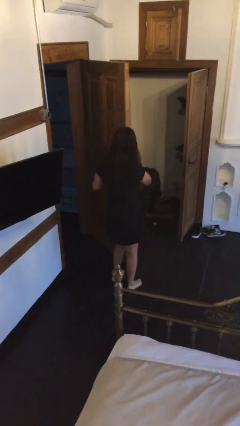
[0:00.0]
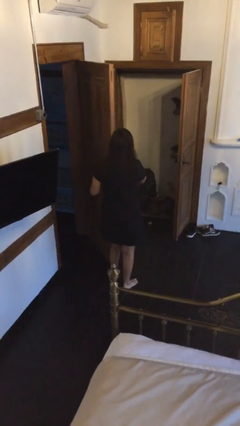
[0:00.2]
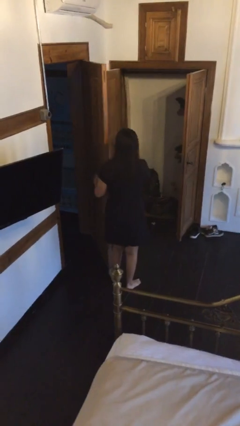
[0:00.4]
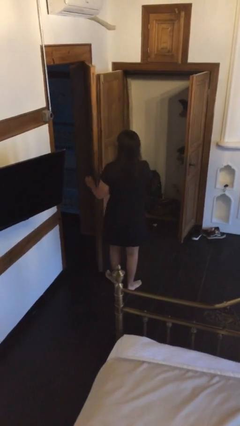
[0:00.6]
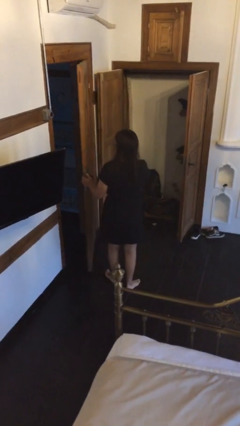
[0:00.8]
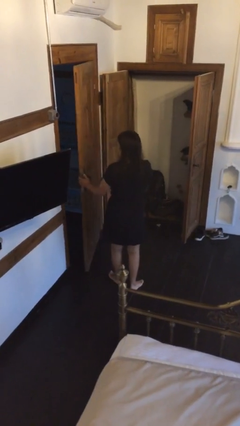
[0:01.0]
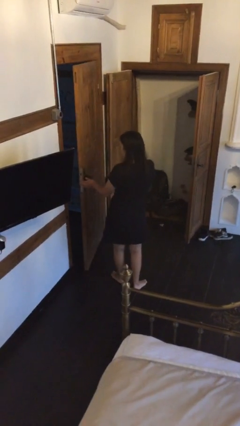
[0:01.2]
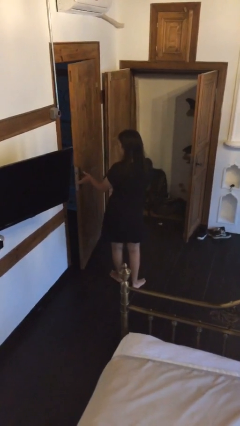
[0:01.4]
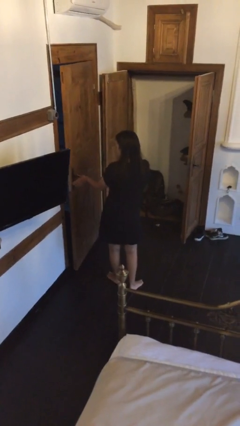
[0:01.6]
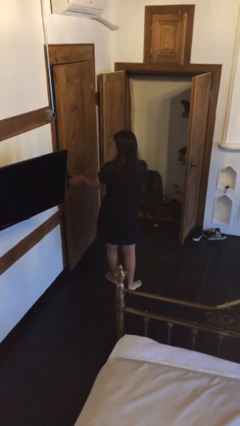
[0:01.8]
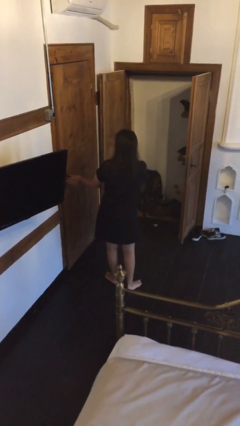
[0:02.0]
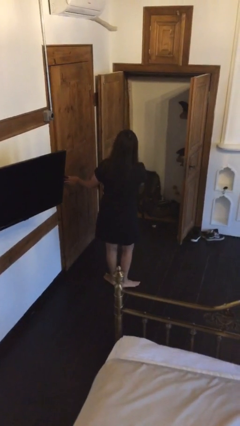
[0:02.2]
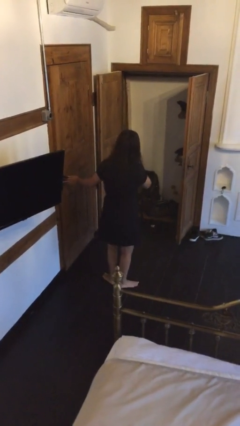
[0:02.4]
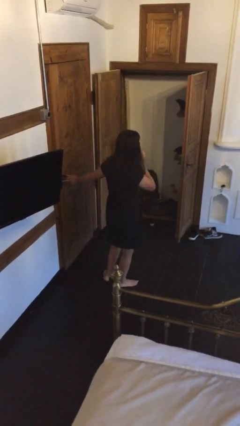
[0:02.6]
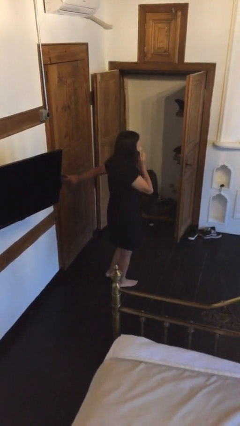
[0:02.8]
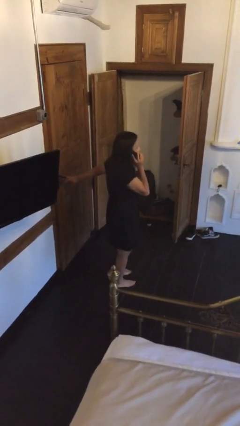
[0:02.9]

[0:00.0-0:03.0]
person closes facility door

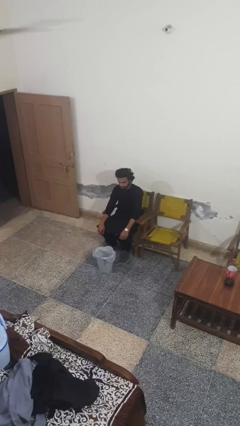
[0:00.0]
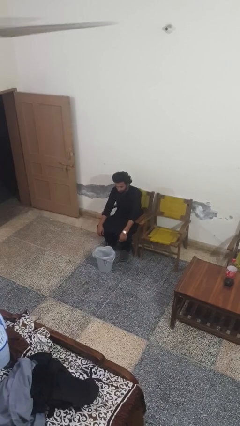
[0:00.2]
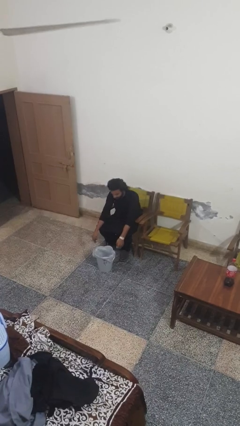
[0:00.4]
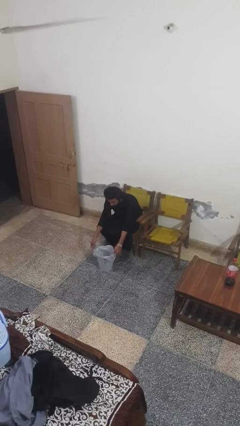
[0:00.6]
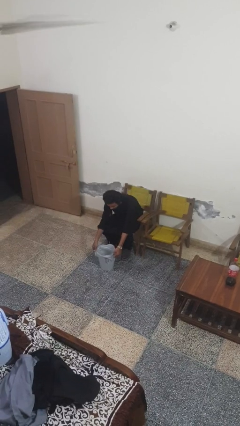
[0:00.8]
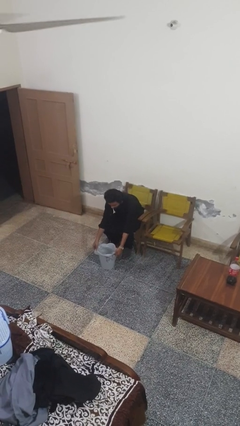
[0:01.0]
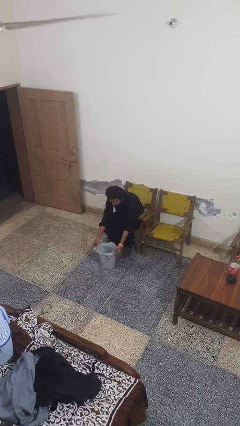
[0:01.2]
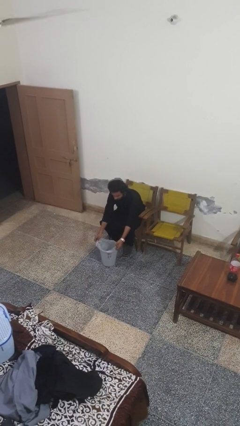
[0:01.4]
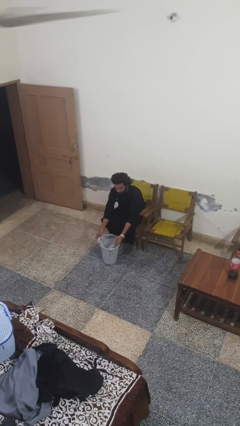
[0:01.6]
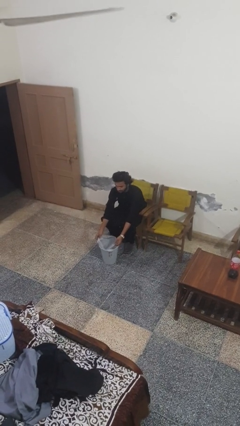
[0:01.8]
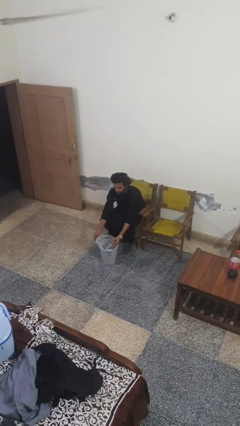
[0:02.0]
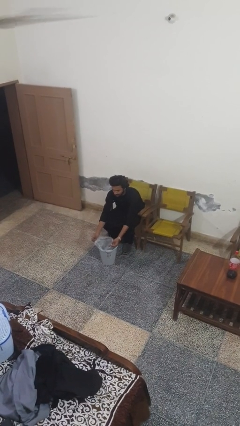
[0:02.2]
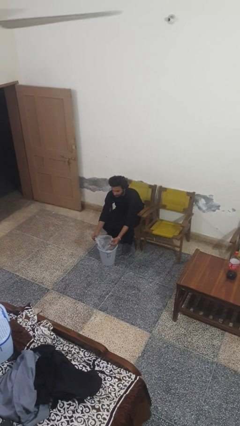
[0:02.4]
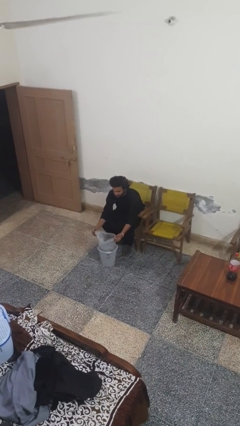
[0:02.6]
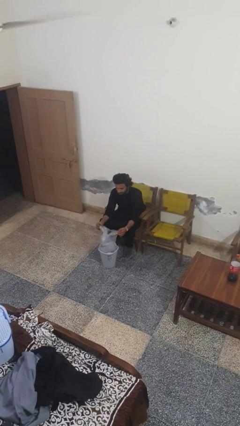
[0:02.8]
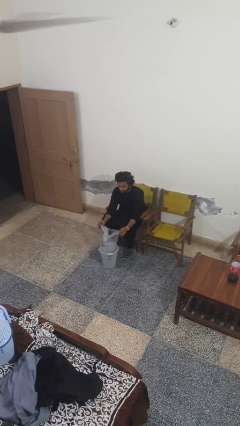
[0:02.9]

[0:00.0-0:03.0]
person removes trashbag from trashcan

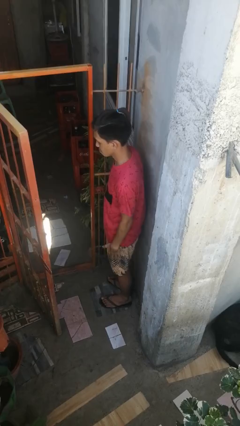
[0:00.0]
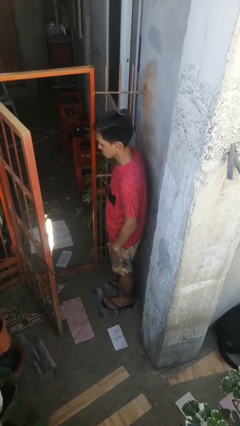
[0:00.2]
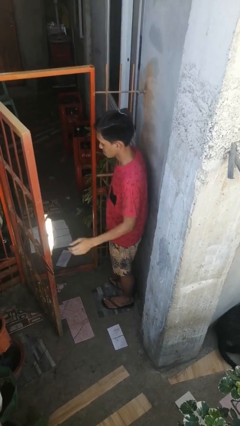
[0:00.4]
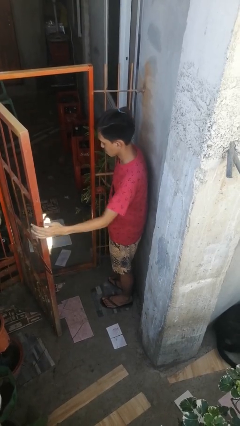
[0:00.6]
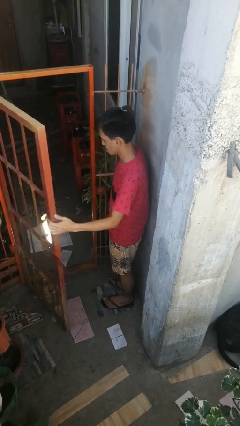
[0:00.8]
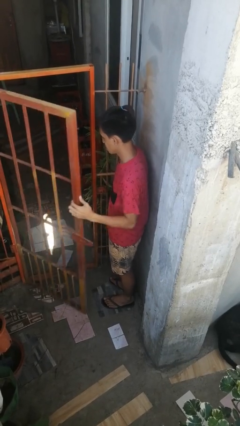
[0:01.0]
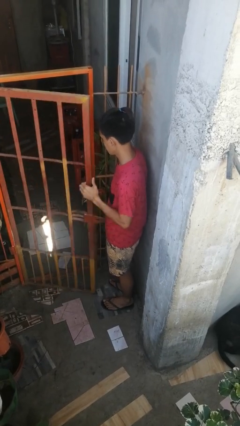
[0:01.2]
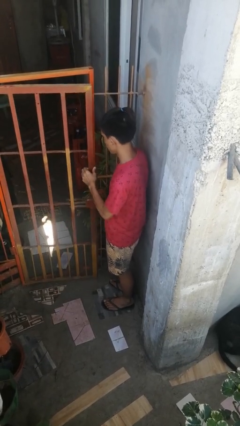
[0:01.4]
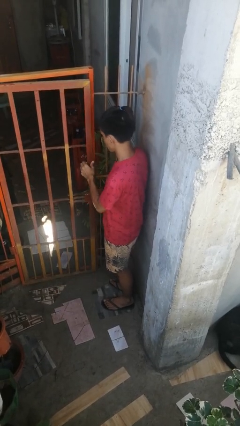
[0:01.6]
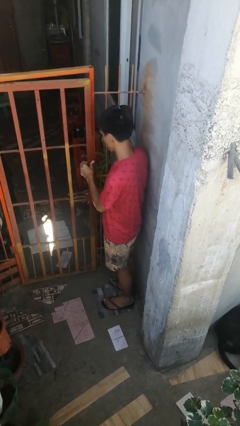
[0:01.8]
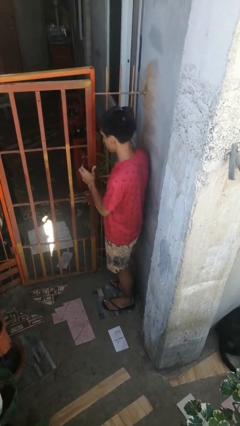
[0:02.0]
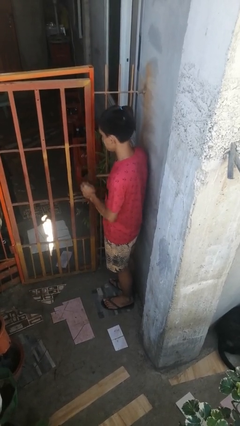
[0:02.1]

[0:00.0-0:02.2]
person closes gate

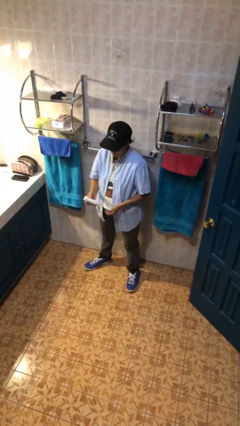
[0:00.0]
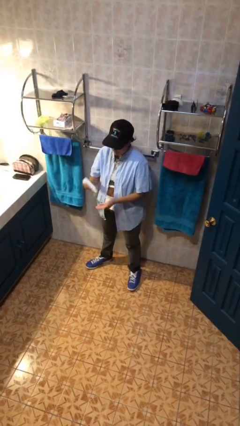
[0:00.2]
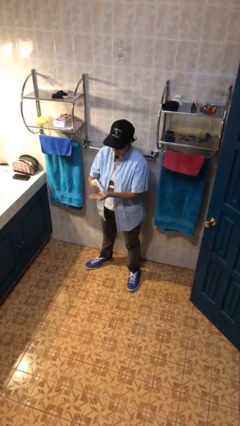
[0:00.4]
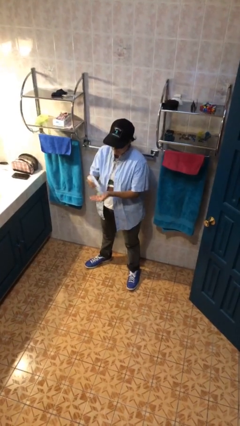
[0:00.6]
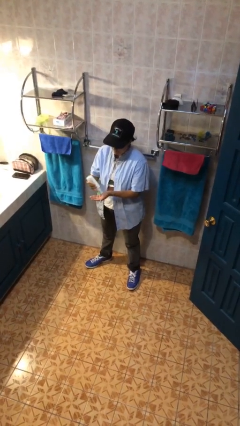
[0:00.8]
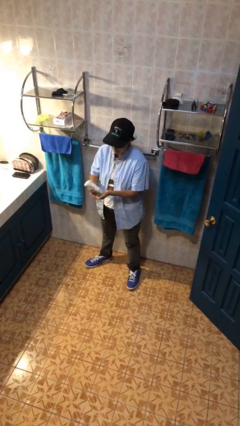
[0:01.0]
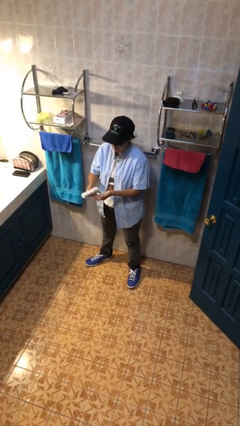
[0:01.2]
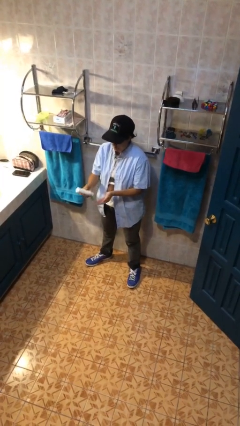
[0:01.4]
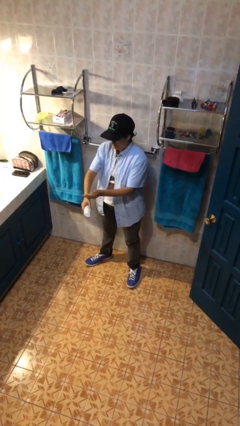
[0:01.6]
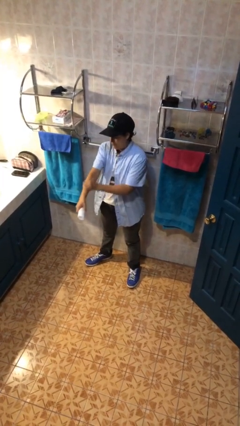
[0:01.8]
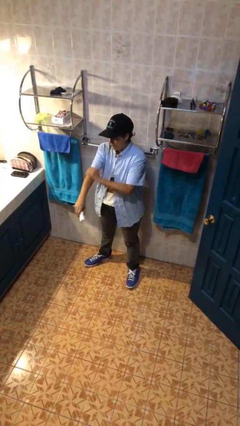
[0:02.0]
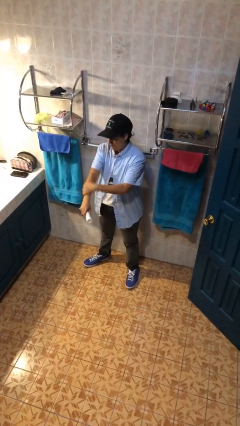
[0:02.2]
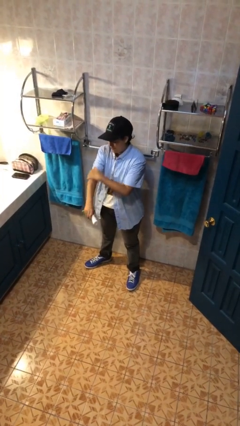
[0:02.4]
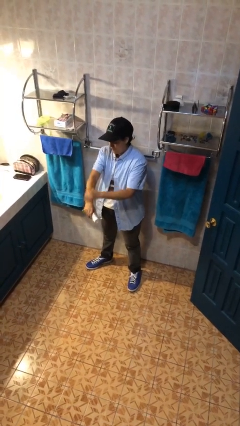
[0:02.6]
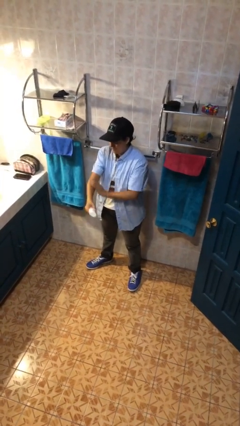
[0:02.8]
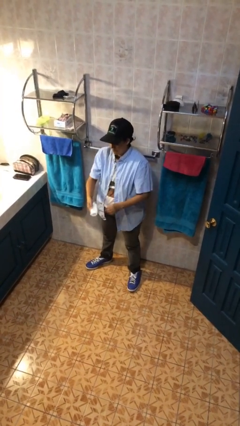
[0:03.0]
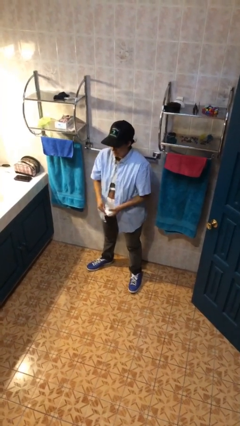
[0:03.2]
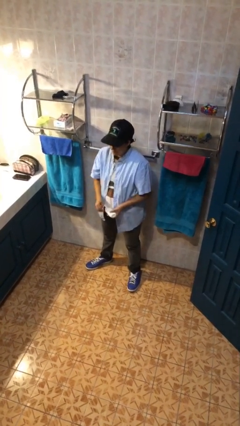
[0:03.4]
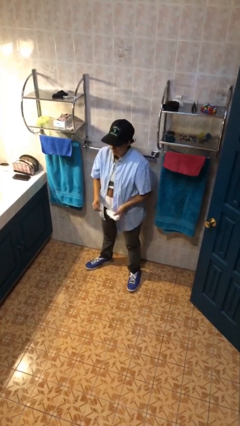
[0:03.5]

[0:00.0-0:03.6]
person applies sunscreen

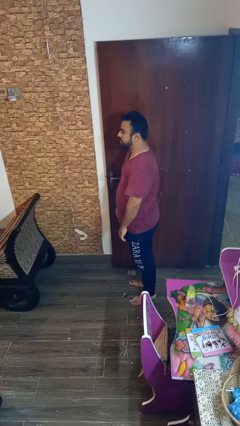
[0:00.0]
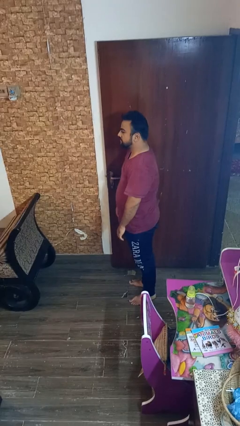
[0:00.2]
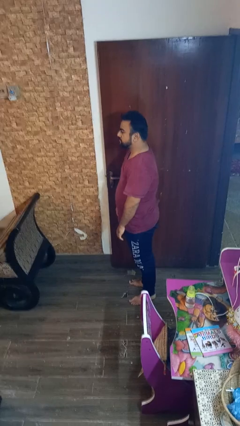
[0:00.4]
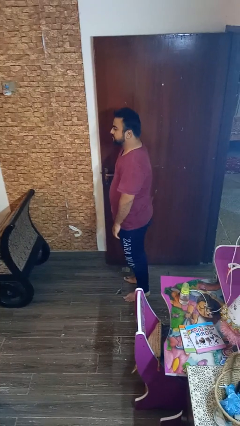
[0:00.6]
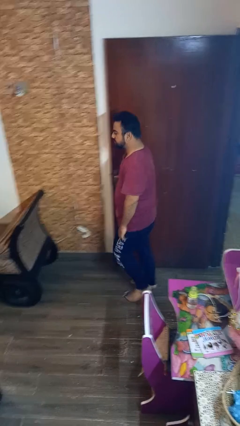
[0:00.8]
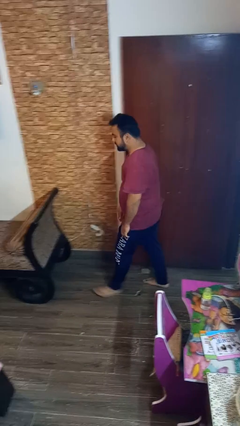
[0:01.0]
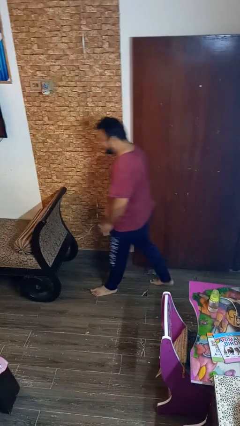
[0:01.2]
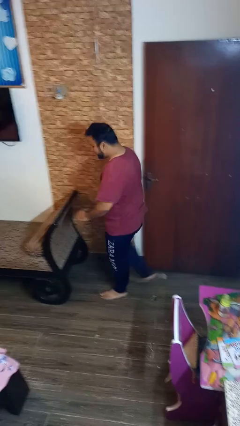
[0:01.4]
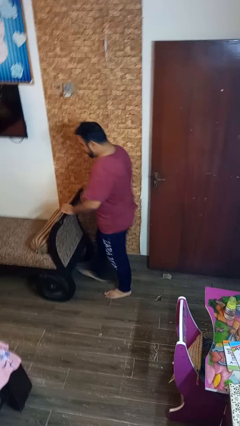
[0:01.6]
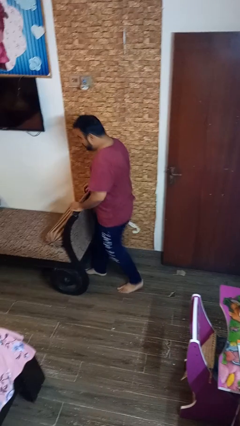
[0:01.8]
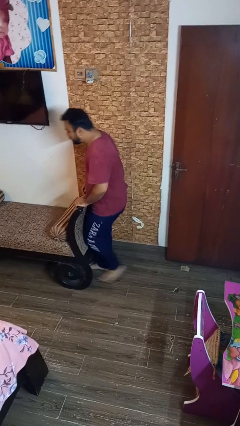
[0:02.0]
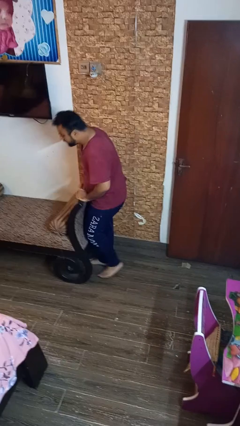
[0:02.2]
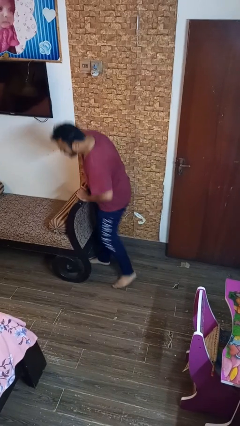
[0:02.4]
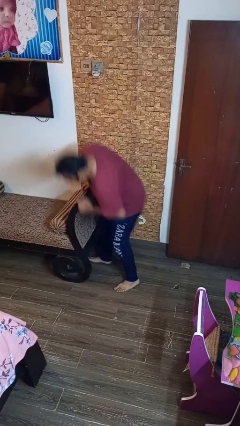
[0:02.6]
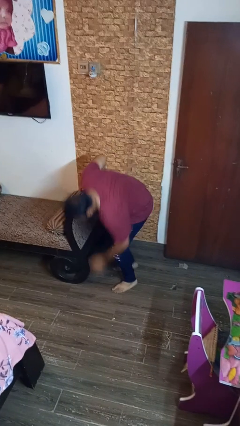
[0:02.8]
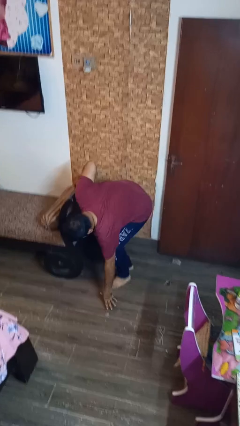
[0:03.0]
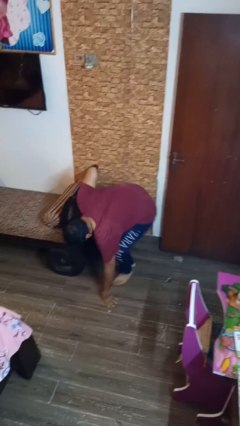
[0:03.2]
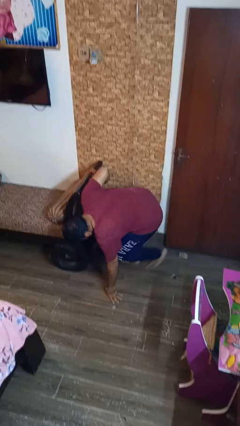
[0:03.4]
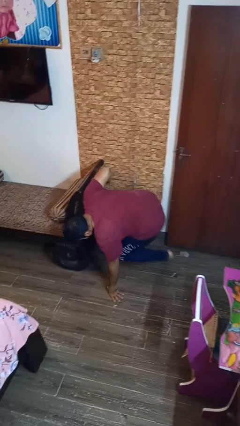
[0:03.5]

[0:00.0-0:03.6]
person trips on object on floor

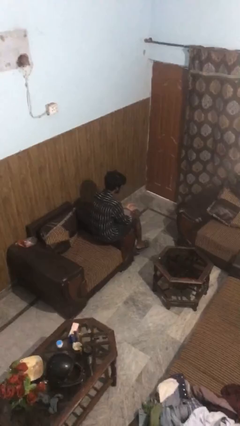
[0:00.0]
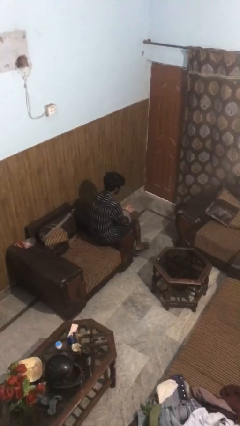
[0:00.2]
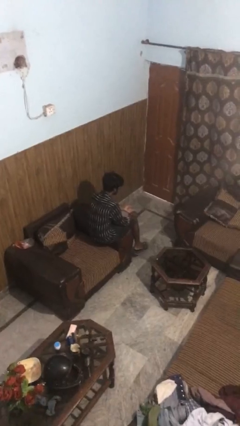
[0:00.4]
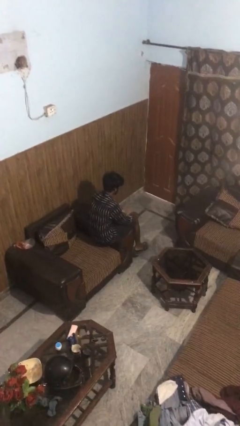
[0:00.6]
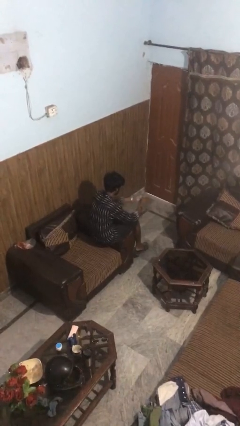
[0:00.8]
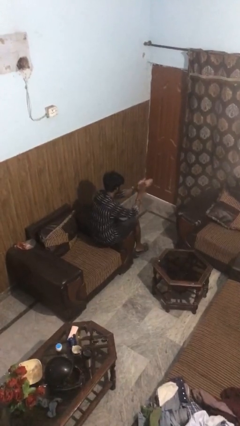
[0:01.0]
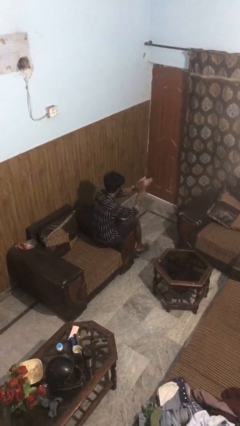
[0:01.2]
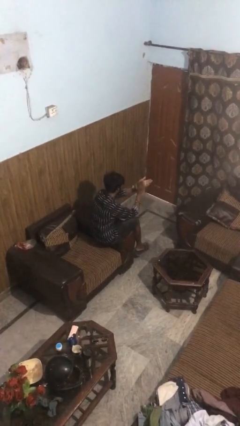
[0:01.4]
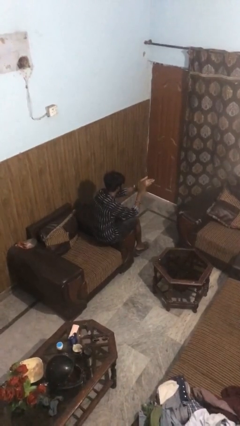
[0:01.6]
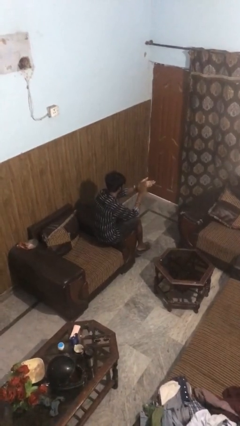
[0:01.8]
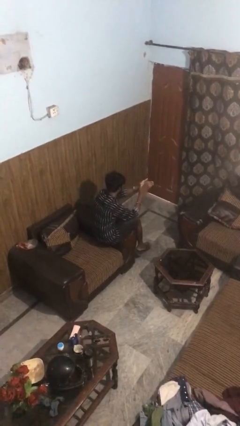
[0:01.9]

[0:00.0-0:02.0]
person claps hands
